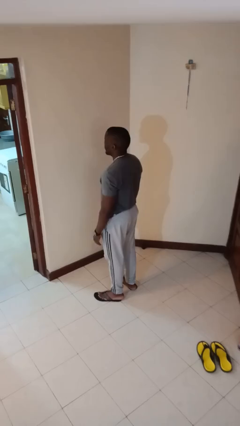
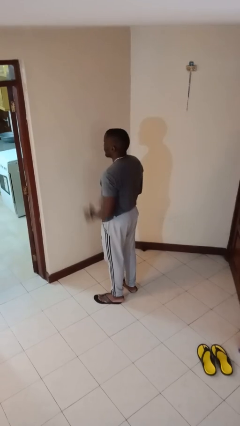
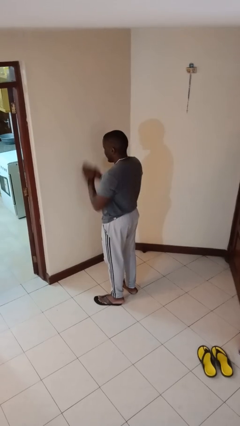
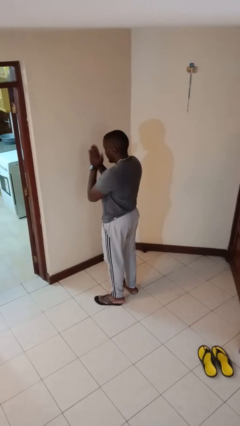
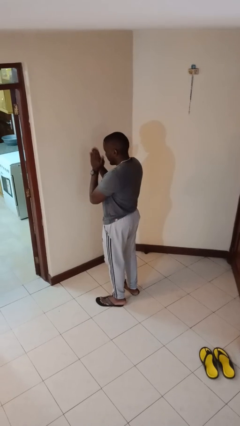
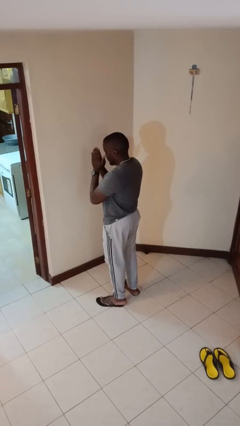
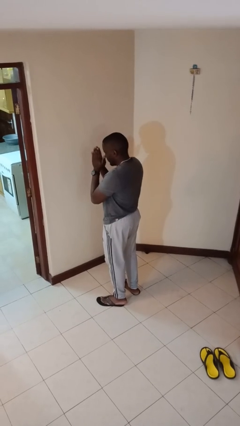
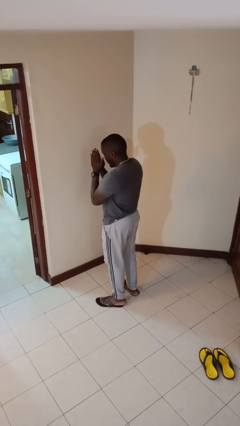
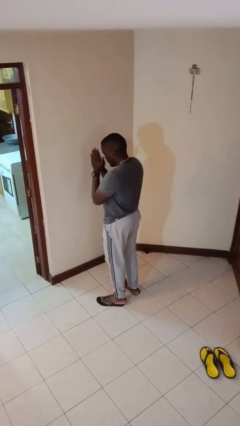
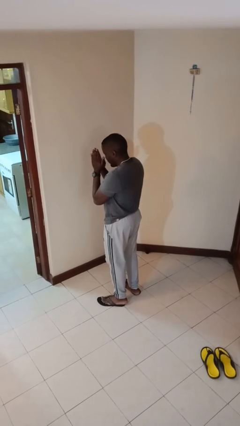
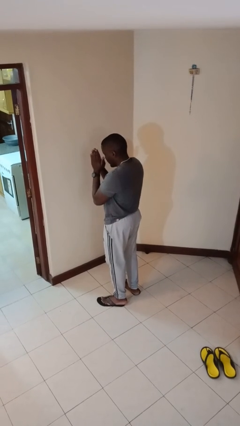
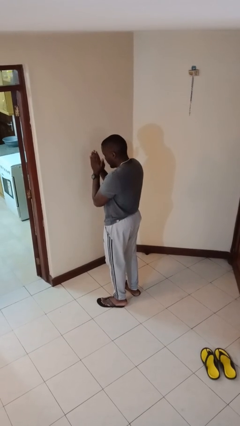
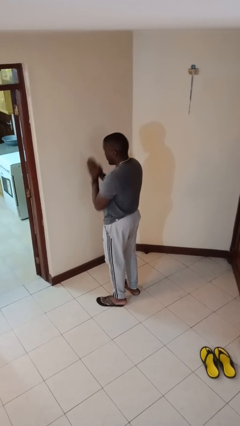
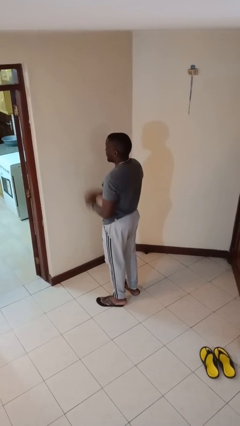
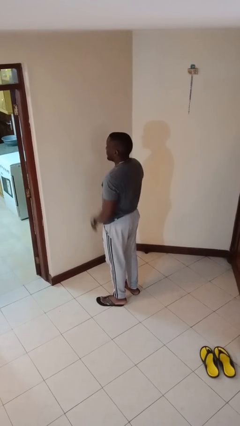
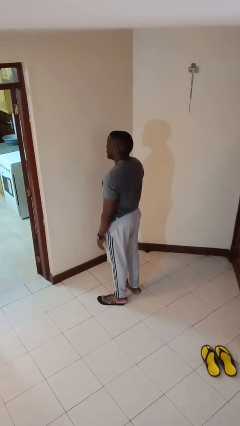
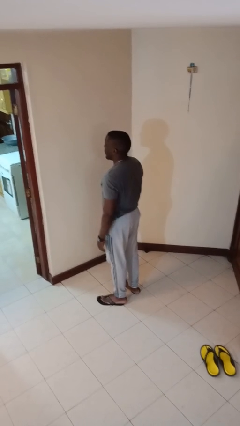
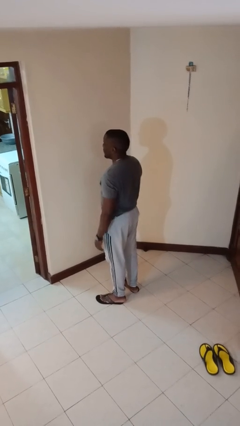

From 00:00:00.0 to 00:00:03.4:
person prays

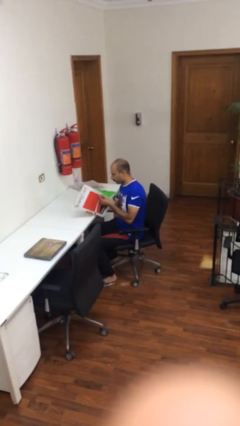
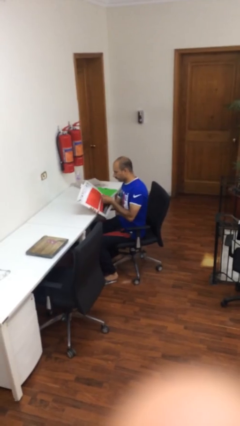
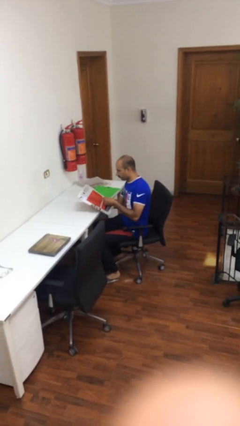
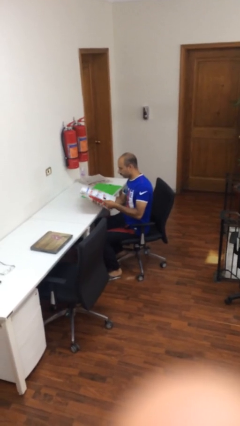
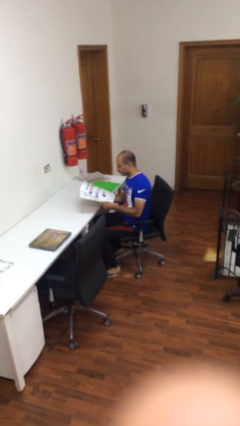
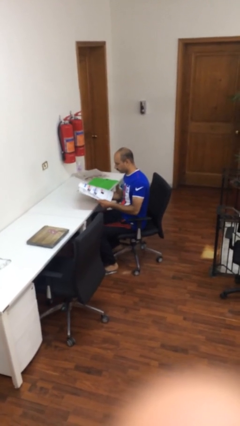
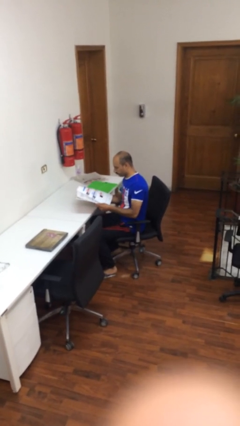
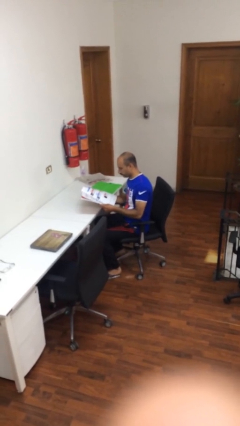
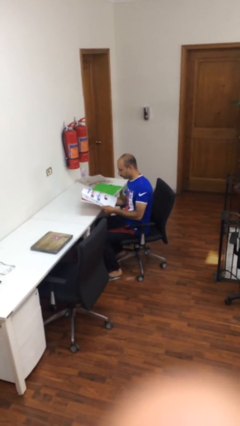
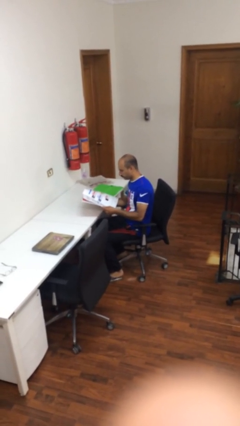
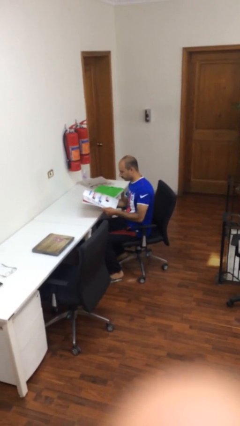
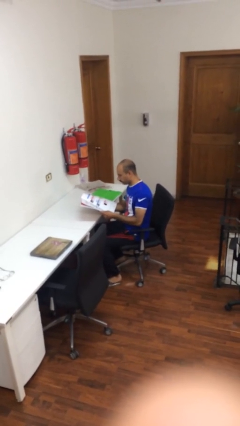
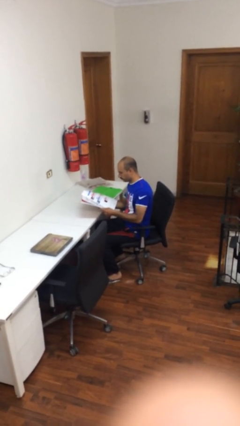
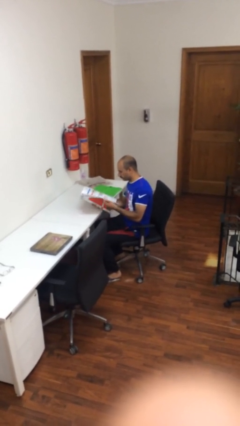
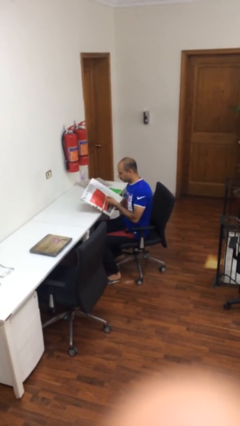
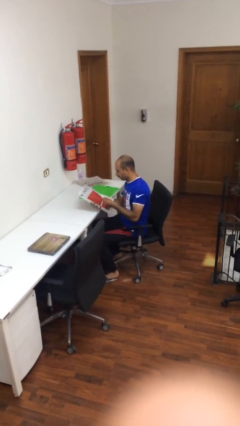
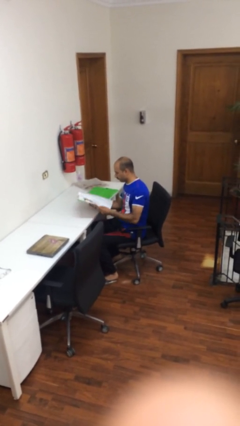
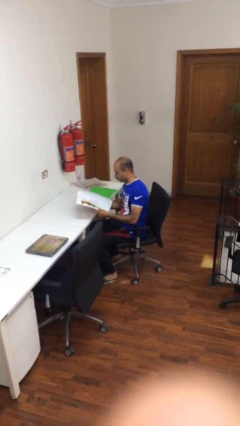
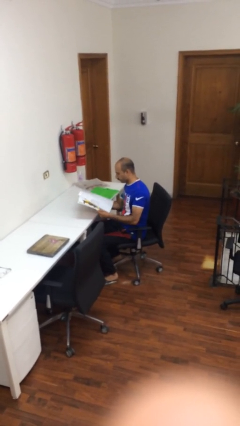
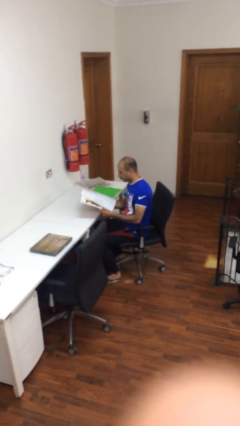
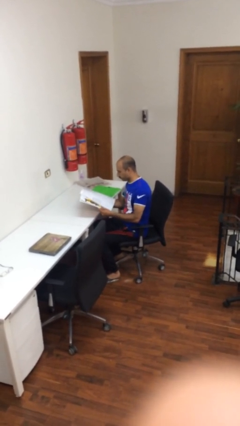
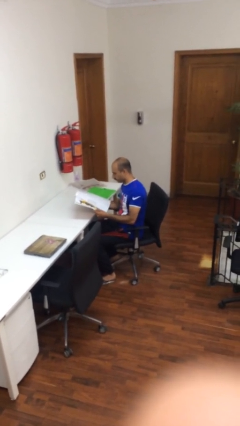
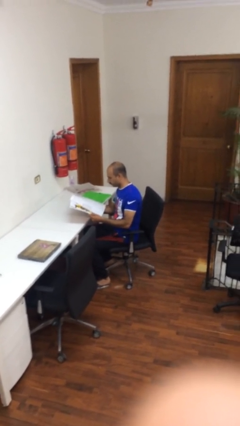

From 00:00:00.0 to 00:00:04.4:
person reads document

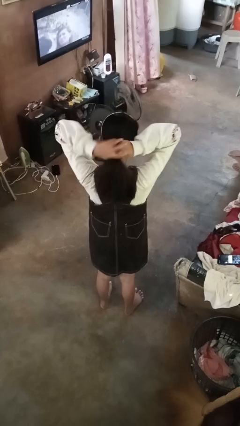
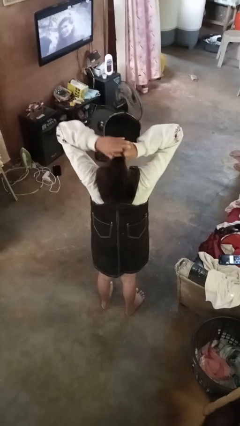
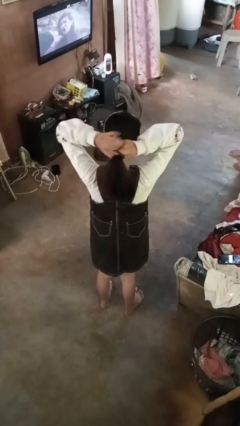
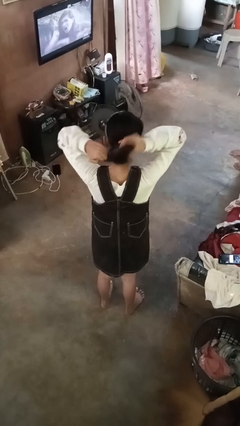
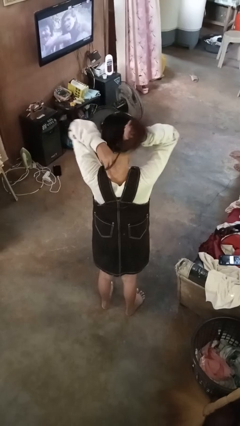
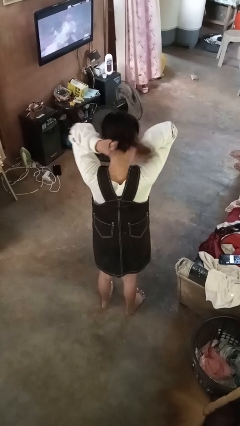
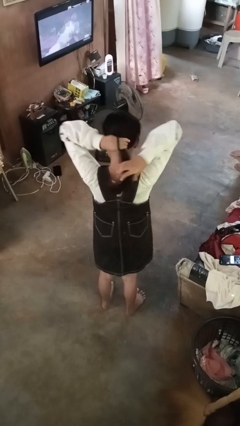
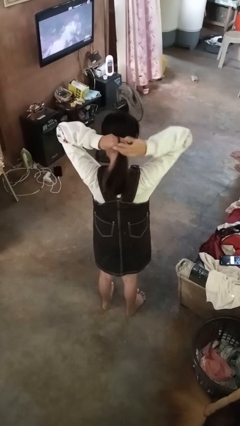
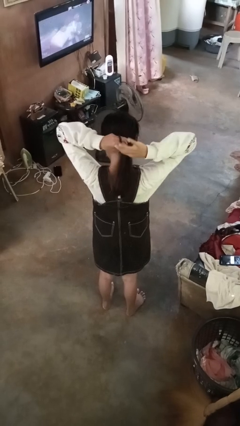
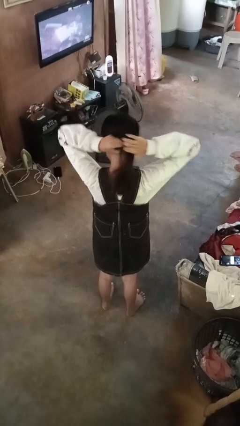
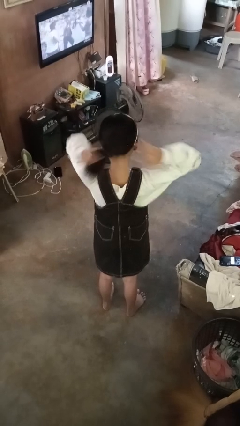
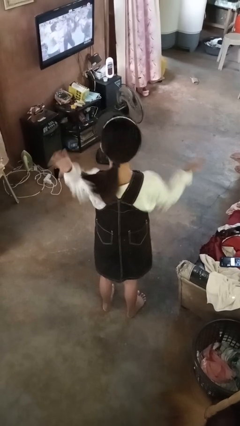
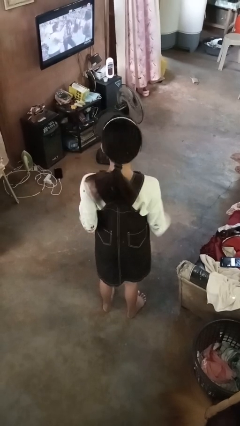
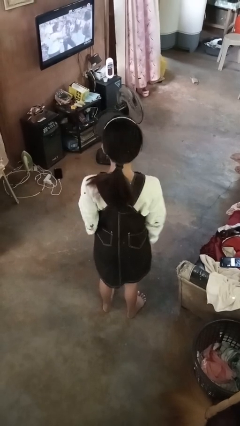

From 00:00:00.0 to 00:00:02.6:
person puts hair in ponytail

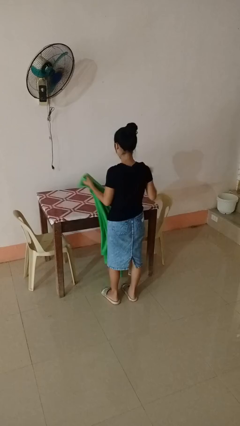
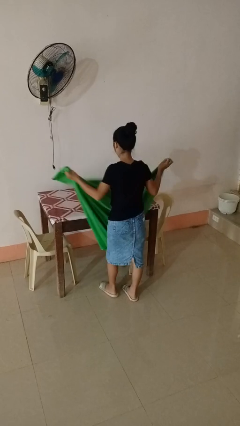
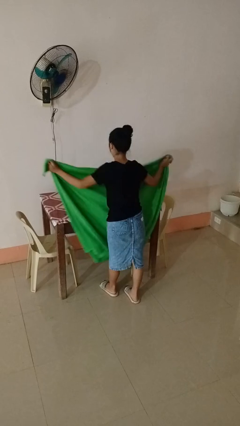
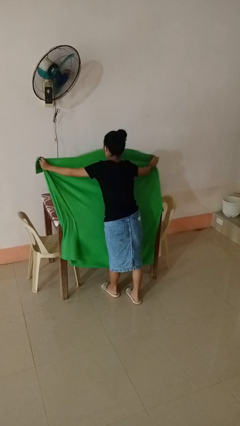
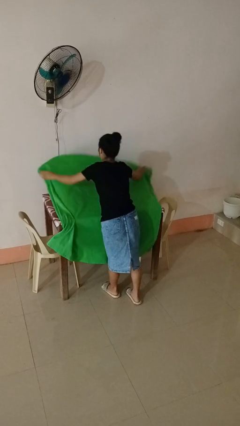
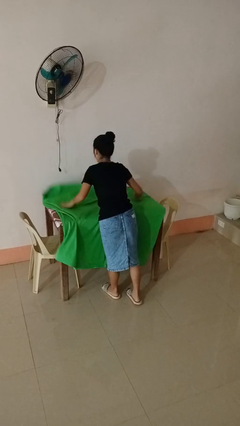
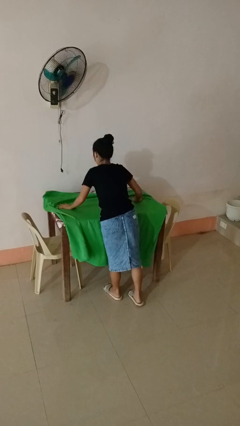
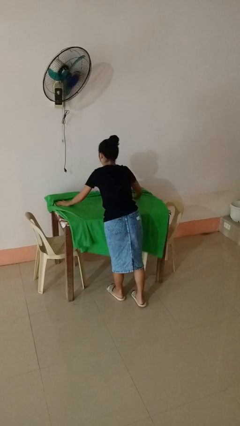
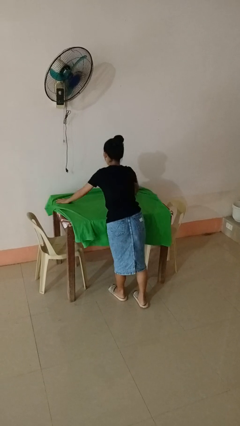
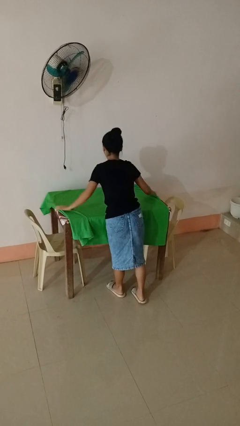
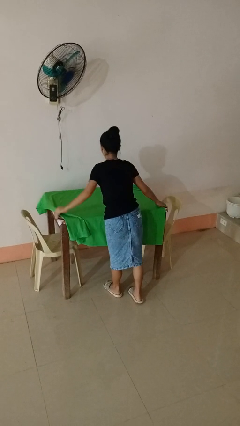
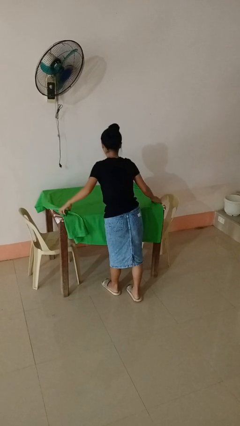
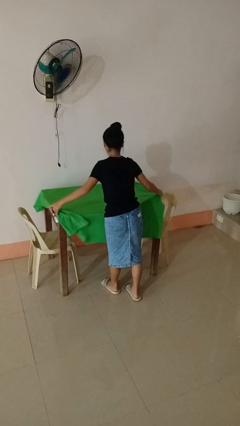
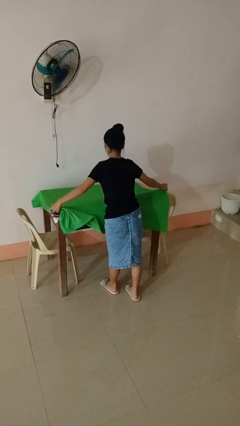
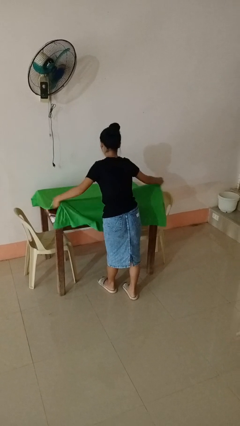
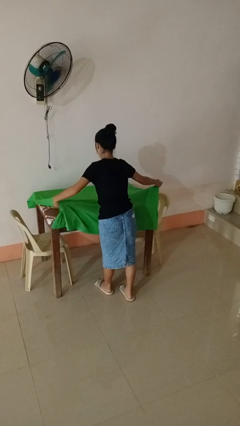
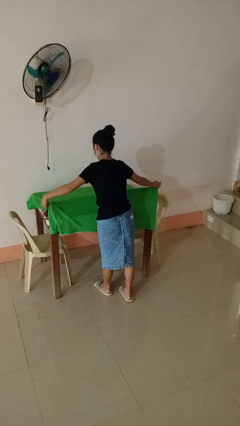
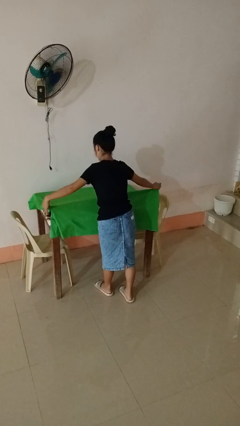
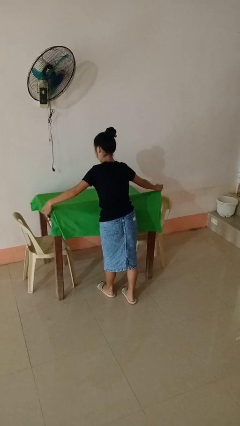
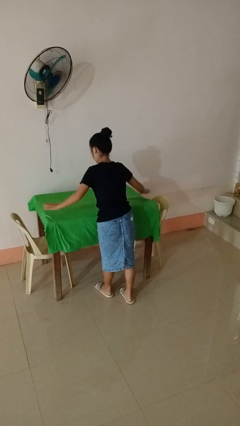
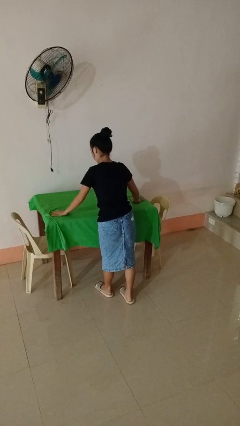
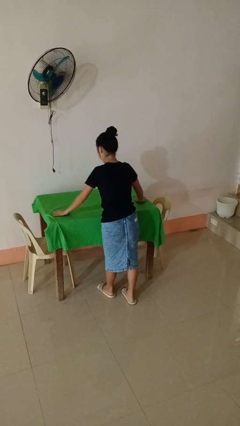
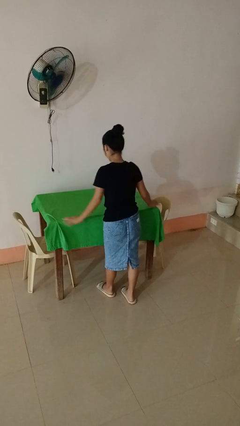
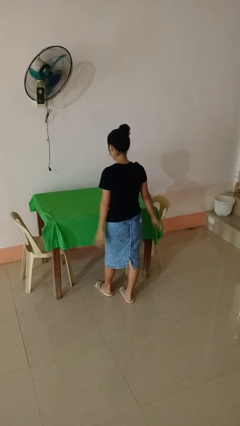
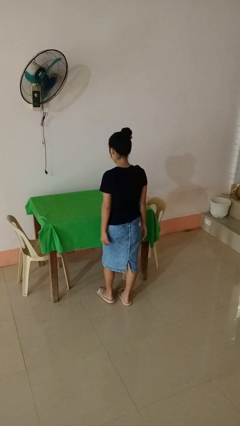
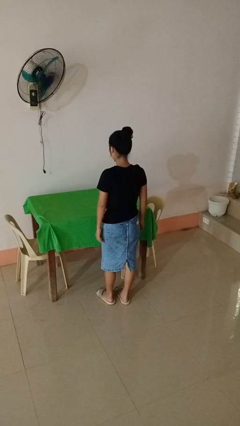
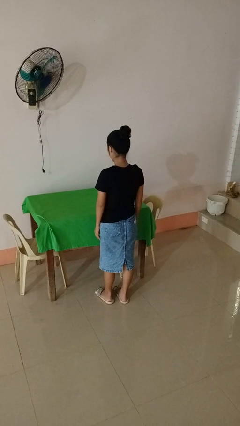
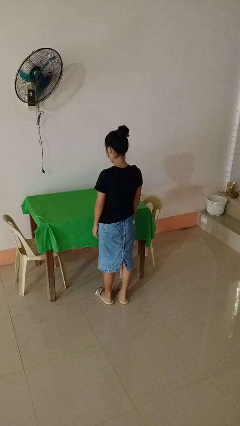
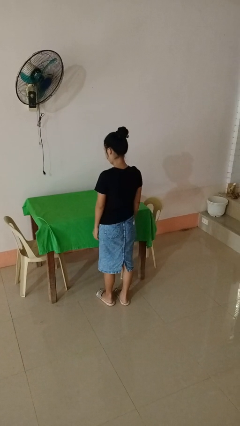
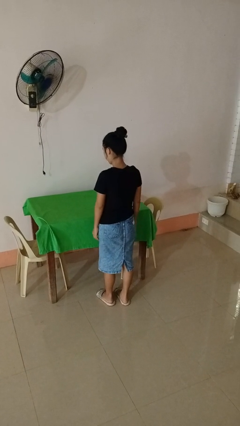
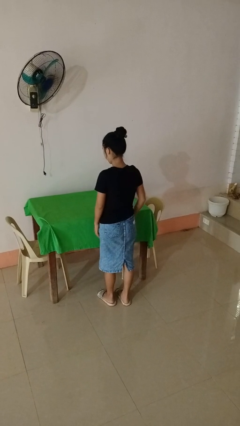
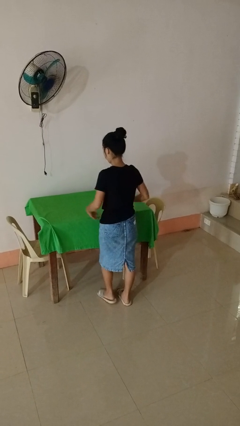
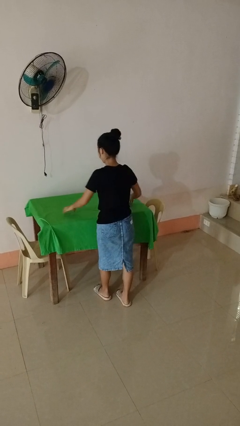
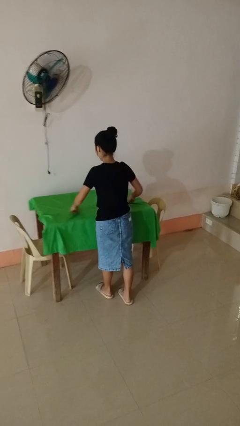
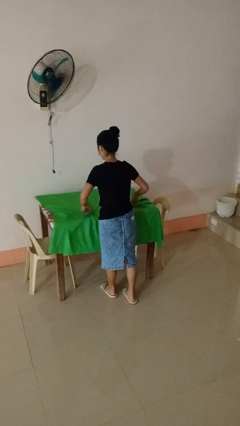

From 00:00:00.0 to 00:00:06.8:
person spreads tablecloth

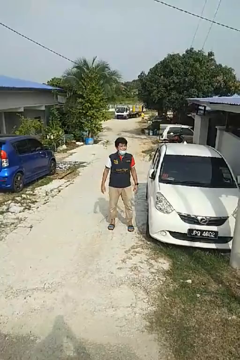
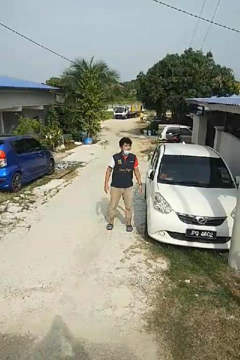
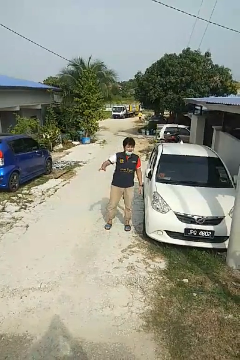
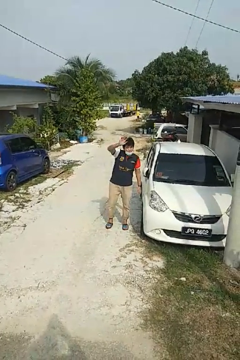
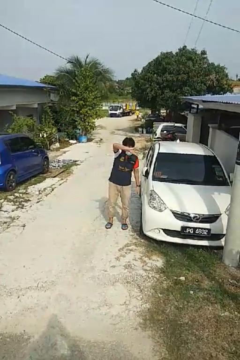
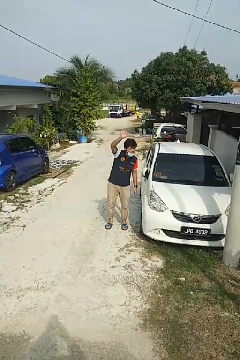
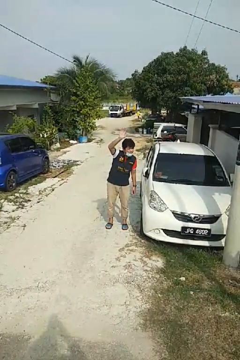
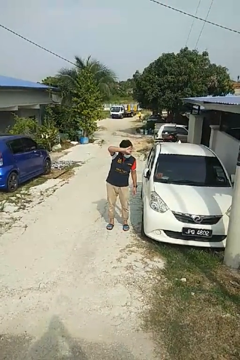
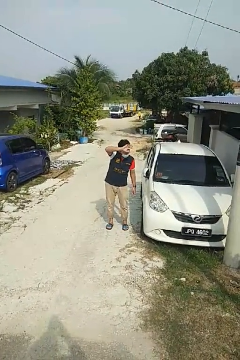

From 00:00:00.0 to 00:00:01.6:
person waves at person
